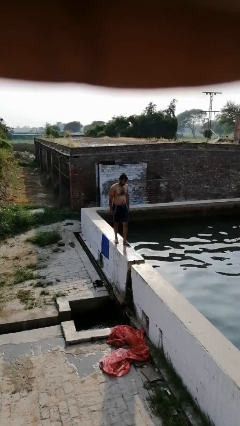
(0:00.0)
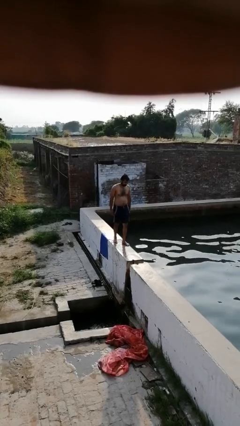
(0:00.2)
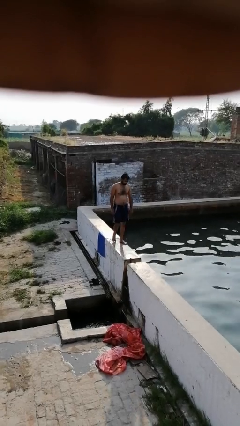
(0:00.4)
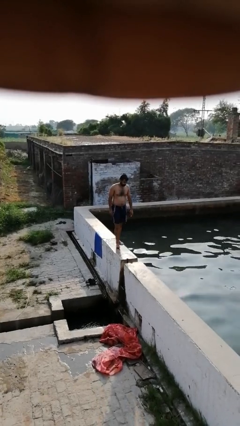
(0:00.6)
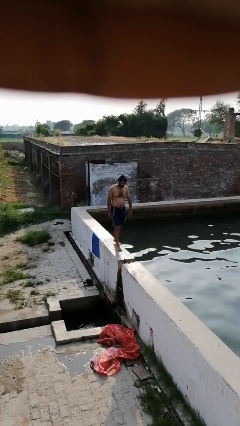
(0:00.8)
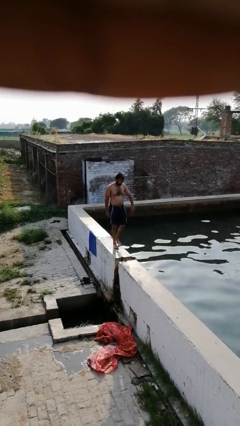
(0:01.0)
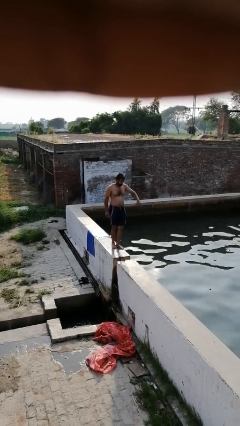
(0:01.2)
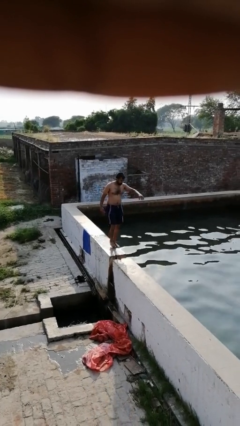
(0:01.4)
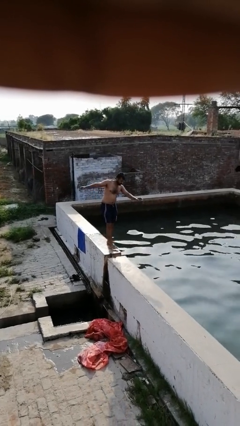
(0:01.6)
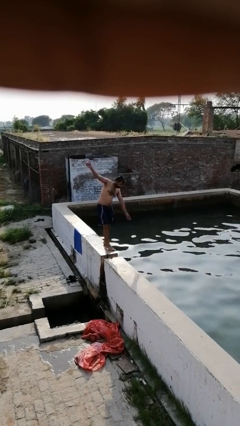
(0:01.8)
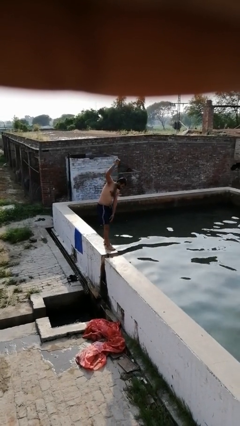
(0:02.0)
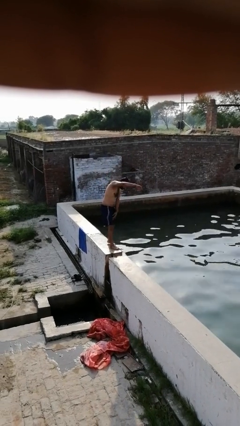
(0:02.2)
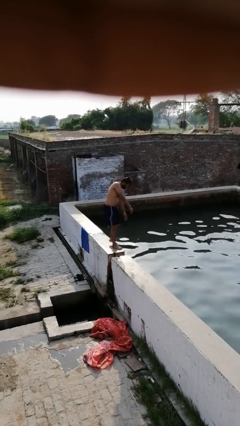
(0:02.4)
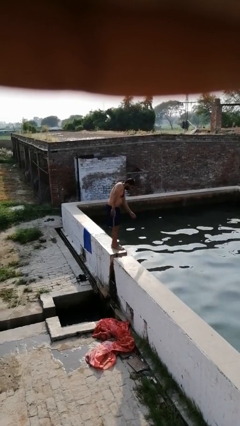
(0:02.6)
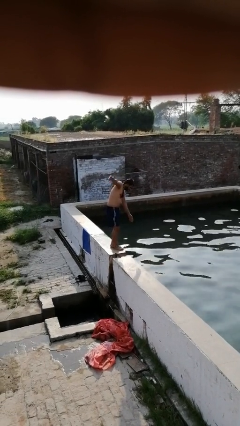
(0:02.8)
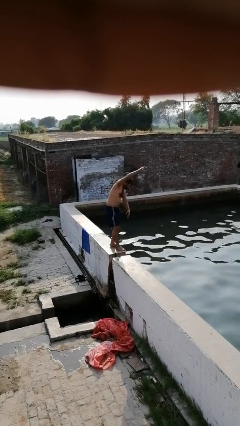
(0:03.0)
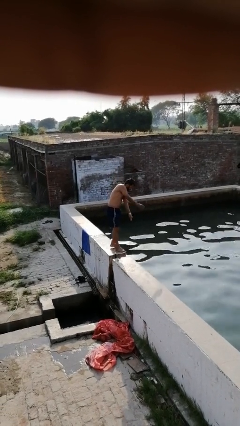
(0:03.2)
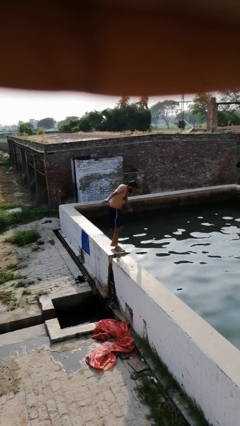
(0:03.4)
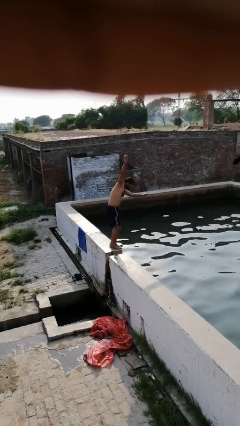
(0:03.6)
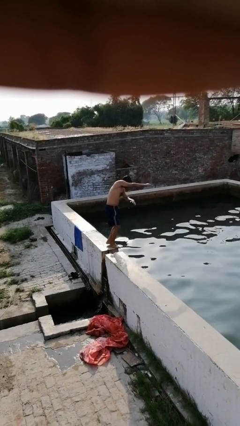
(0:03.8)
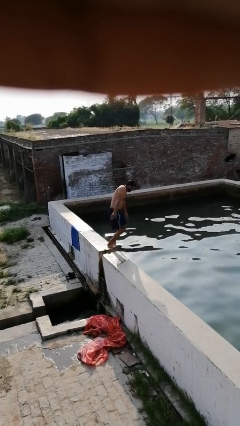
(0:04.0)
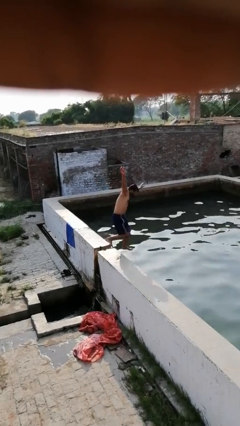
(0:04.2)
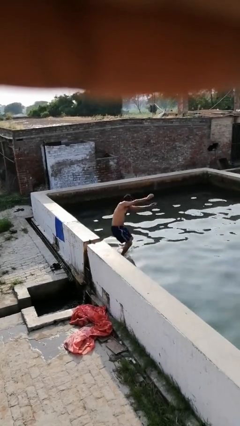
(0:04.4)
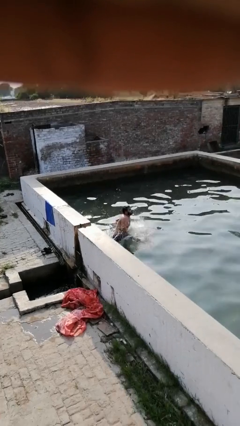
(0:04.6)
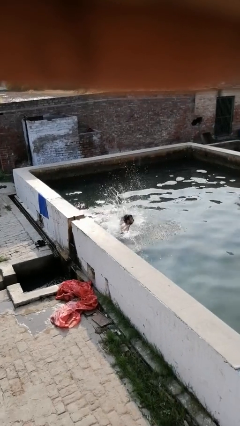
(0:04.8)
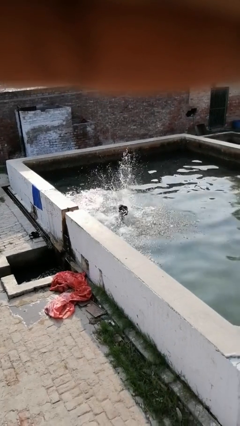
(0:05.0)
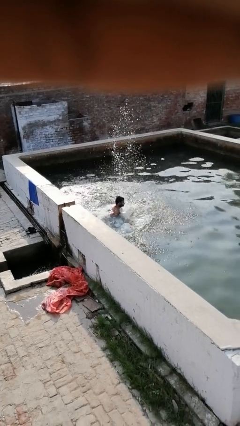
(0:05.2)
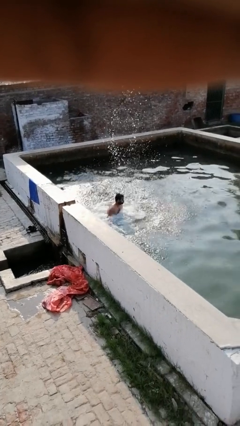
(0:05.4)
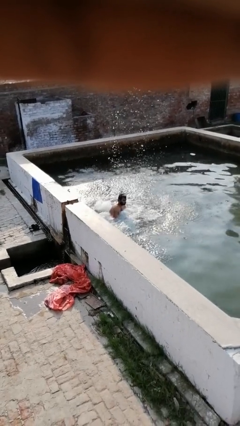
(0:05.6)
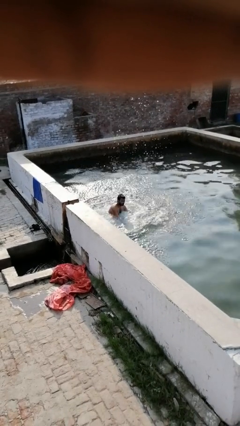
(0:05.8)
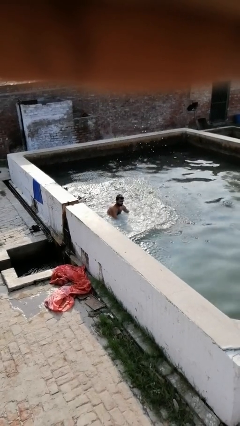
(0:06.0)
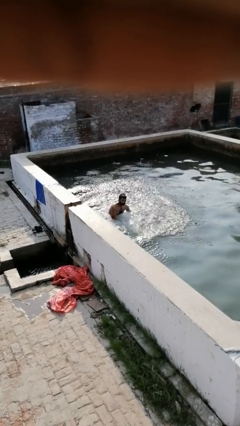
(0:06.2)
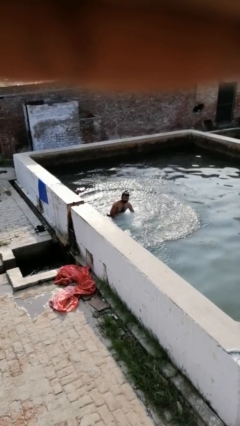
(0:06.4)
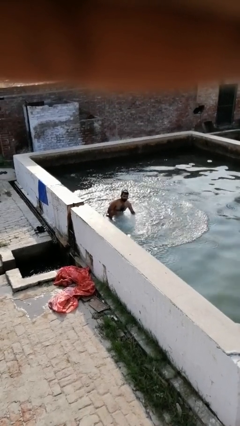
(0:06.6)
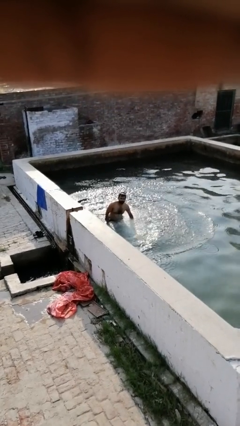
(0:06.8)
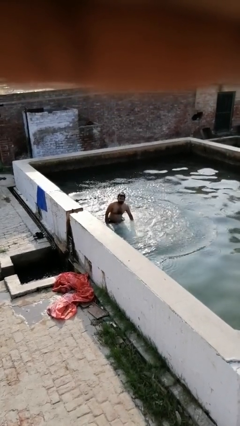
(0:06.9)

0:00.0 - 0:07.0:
person falls into pool

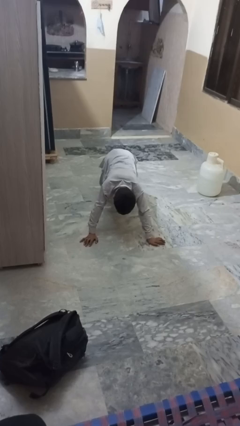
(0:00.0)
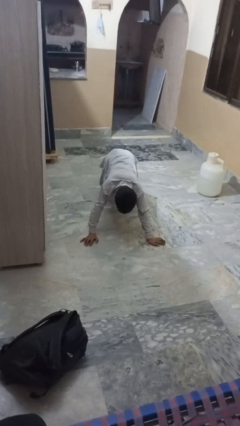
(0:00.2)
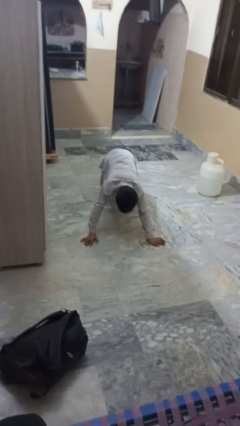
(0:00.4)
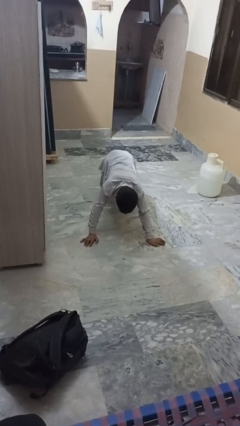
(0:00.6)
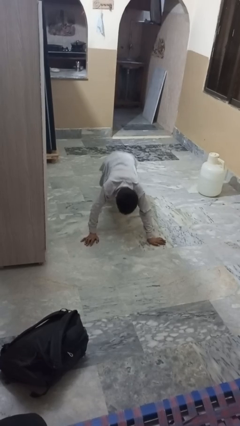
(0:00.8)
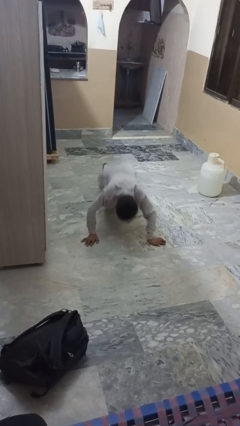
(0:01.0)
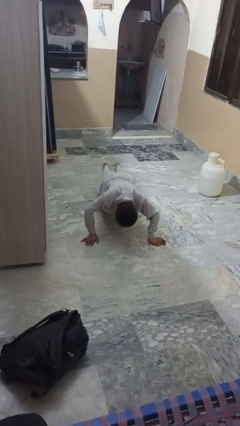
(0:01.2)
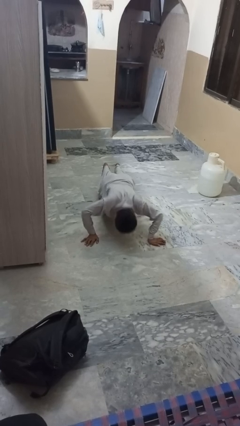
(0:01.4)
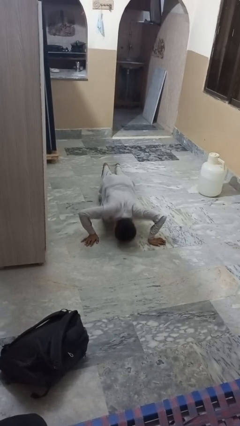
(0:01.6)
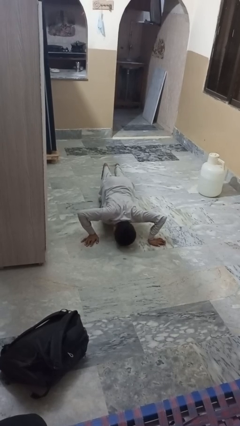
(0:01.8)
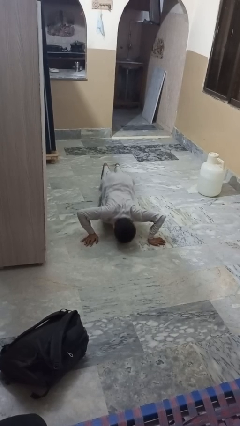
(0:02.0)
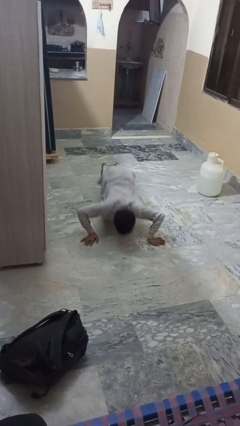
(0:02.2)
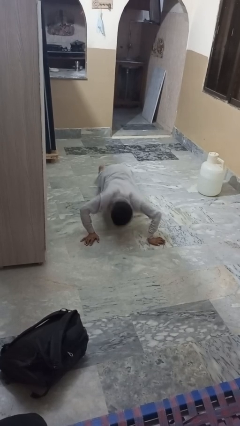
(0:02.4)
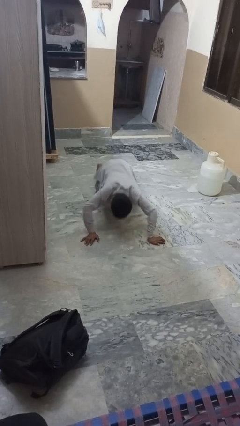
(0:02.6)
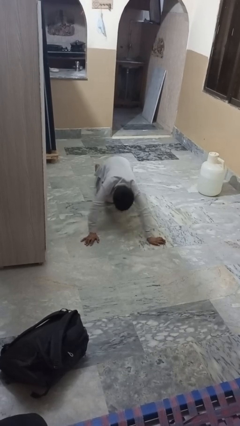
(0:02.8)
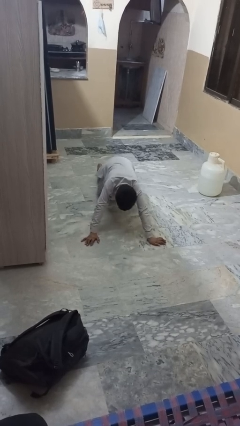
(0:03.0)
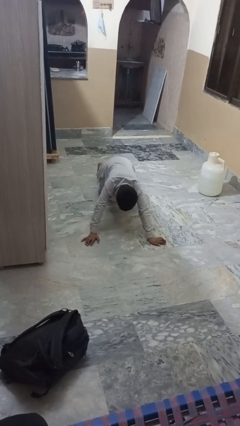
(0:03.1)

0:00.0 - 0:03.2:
person exercises with pushup

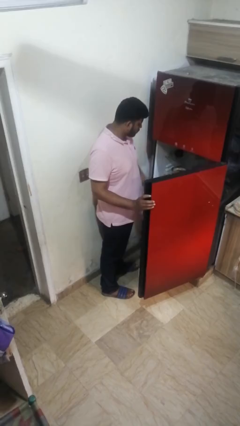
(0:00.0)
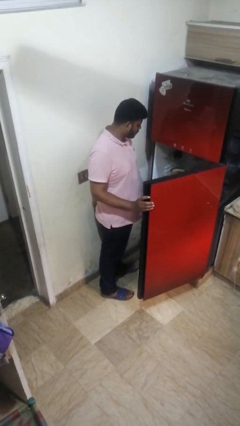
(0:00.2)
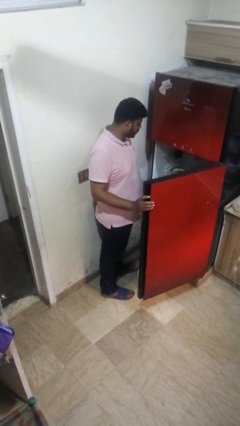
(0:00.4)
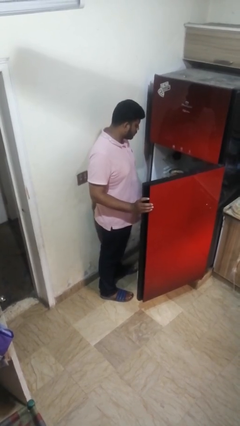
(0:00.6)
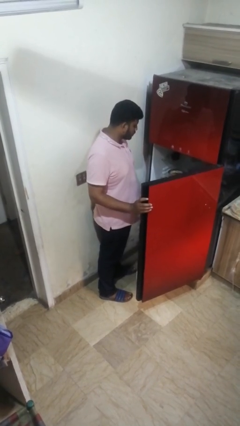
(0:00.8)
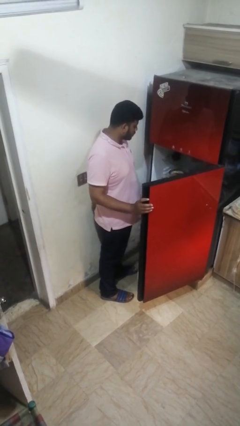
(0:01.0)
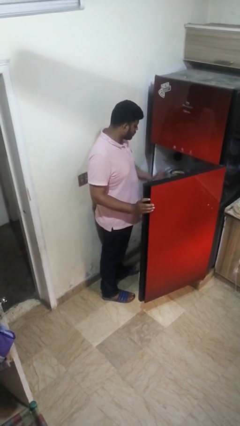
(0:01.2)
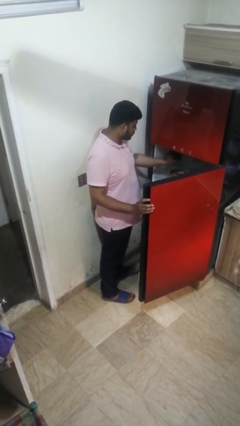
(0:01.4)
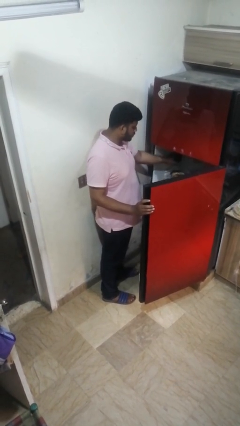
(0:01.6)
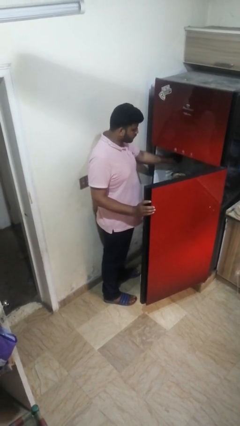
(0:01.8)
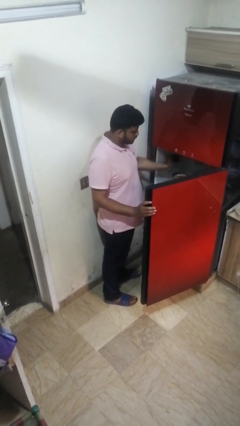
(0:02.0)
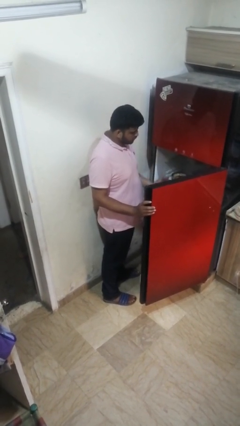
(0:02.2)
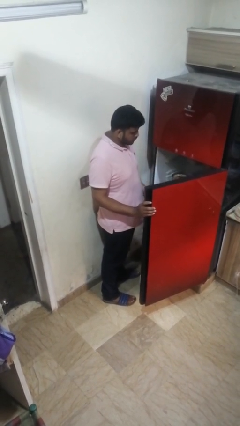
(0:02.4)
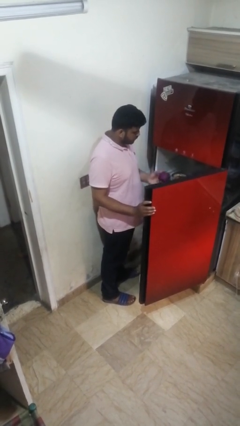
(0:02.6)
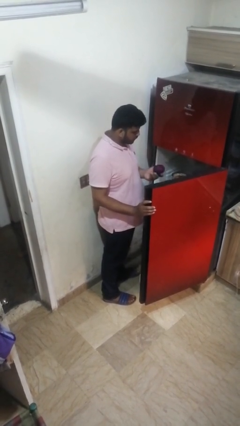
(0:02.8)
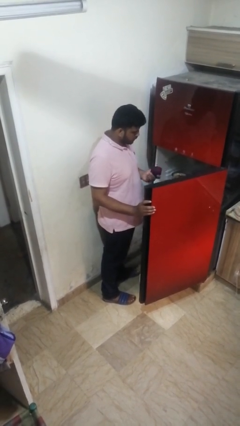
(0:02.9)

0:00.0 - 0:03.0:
person takes object from refrigerator

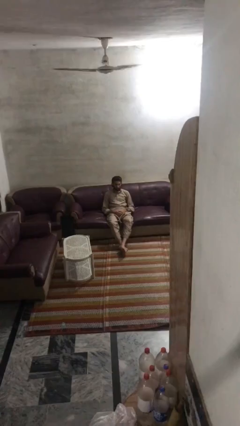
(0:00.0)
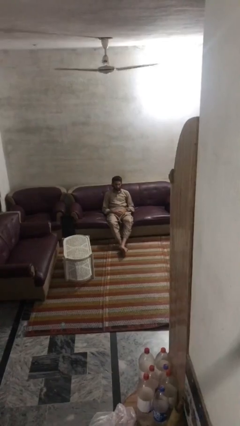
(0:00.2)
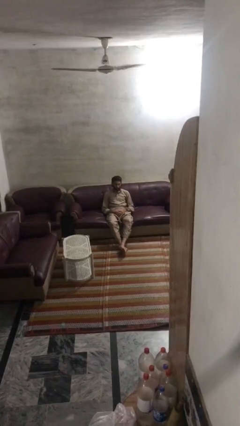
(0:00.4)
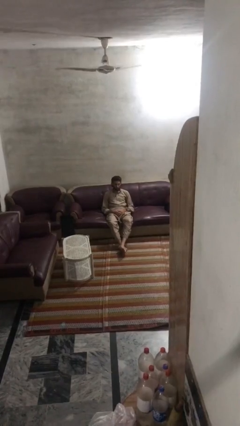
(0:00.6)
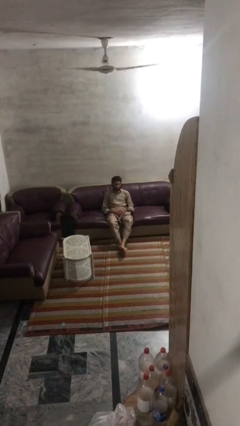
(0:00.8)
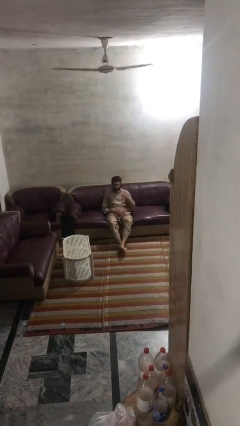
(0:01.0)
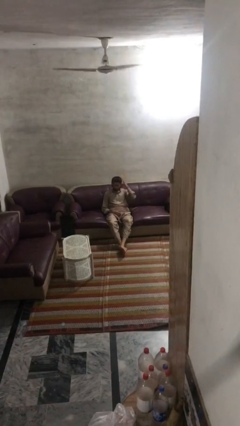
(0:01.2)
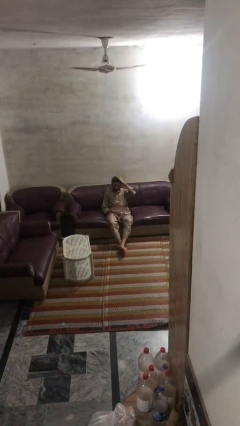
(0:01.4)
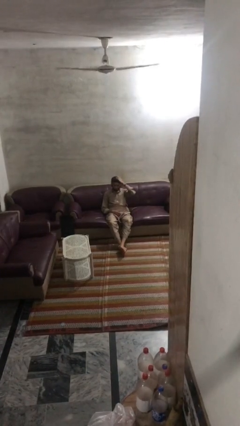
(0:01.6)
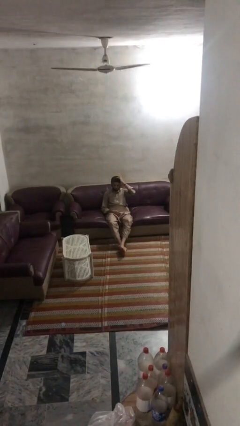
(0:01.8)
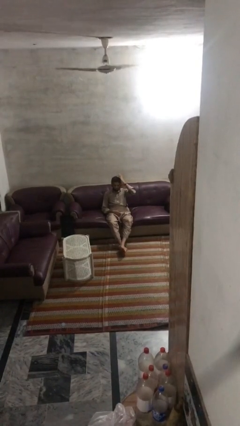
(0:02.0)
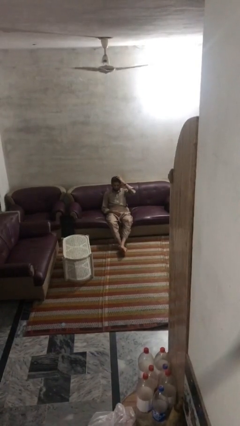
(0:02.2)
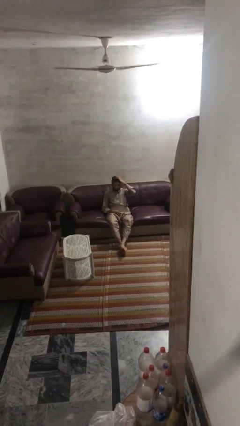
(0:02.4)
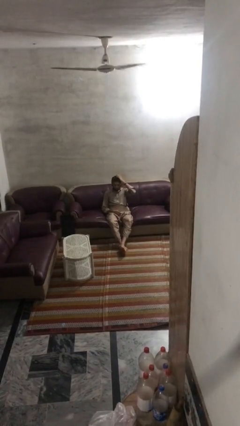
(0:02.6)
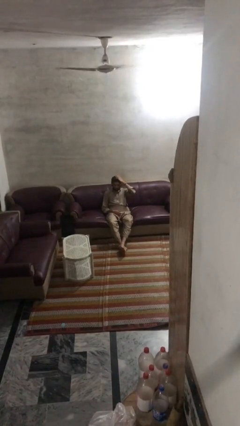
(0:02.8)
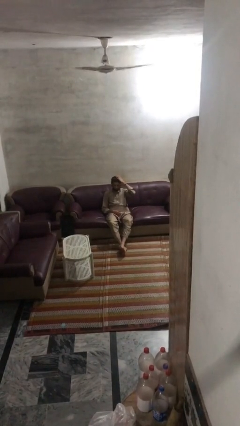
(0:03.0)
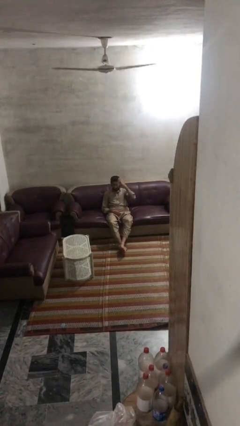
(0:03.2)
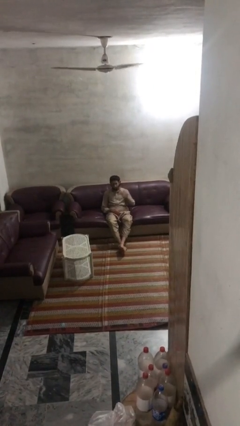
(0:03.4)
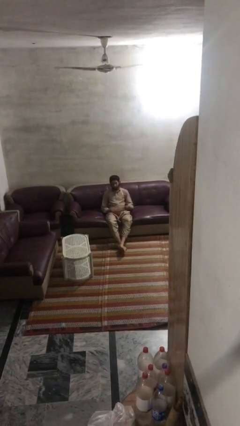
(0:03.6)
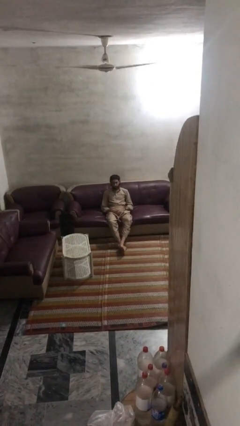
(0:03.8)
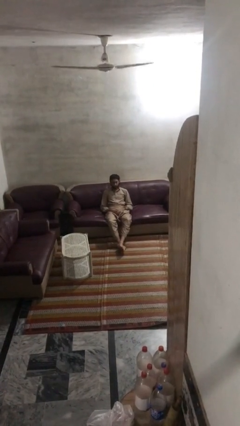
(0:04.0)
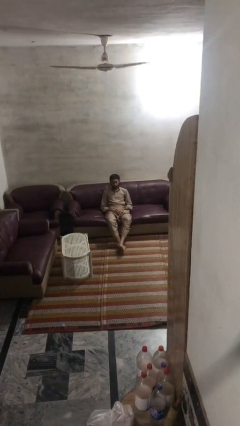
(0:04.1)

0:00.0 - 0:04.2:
person pats head

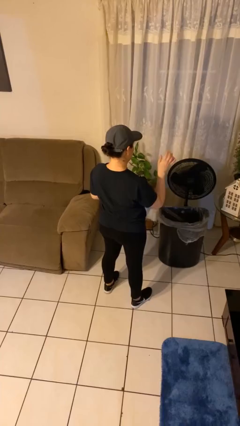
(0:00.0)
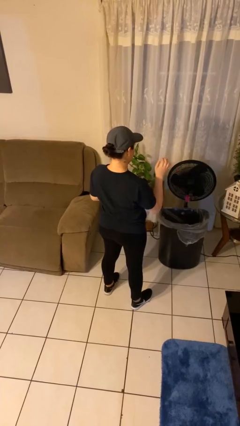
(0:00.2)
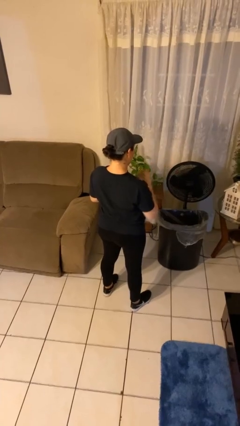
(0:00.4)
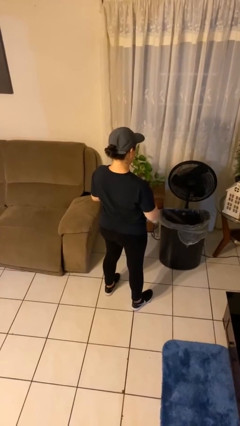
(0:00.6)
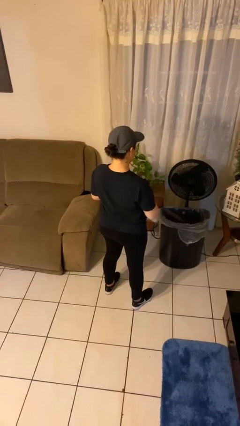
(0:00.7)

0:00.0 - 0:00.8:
person discards trash
